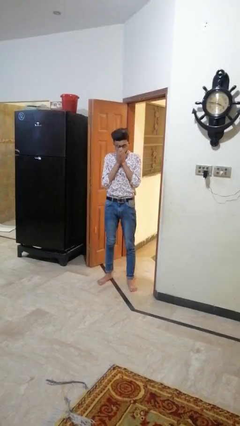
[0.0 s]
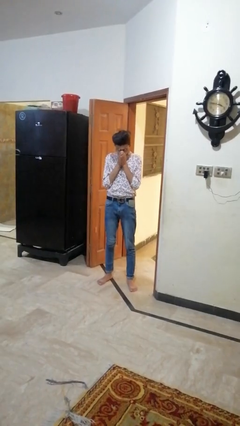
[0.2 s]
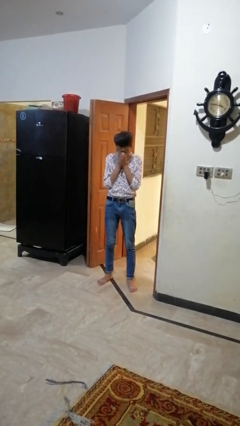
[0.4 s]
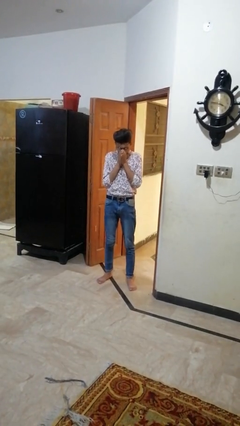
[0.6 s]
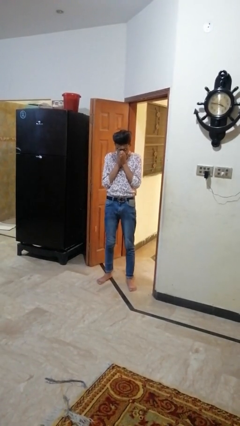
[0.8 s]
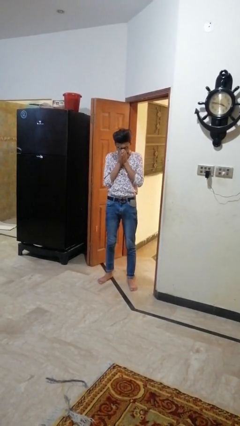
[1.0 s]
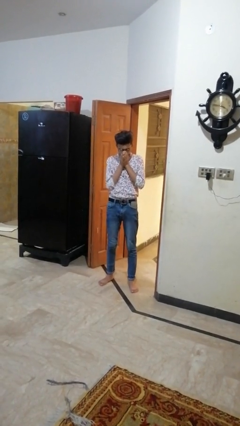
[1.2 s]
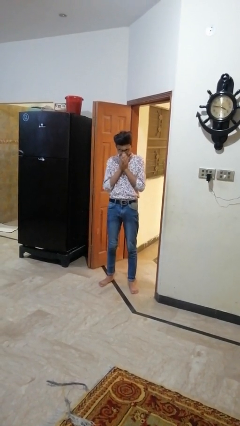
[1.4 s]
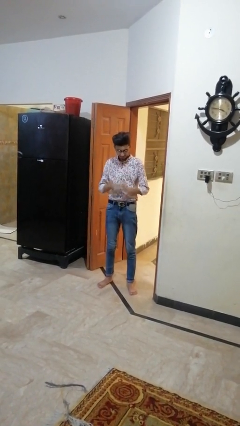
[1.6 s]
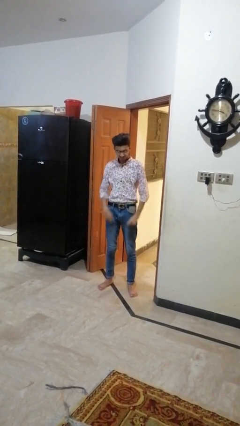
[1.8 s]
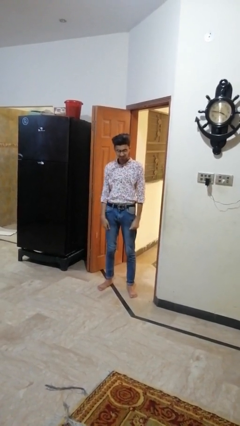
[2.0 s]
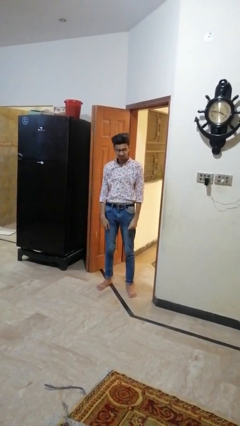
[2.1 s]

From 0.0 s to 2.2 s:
person sneezes into hand

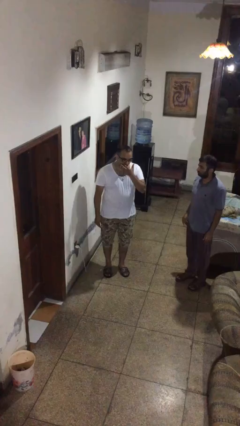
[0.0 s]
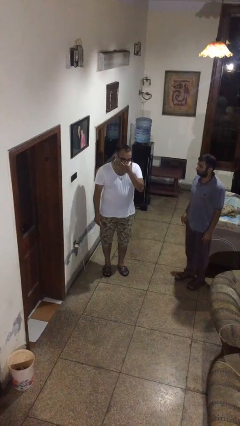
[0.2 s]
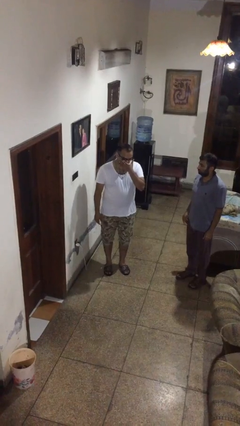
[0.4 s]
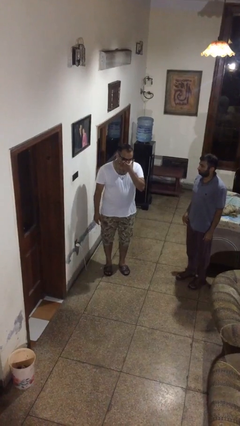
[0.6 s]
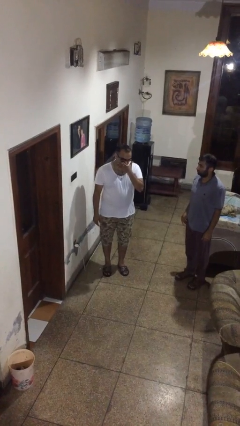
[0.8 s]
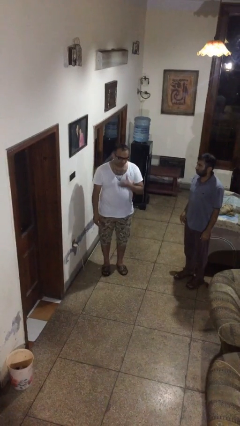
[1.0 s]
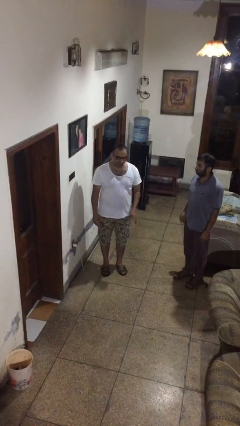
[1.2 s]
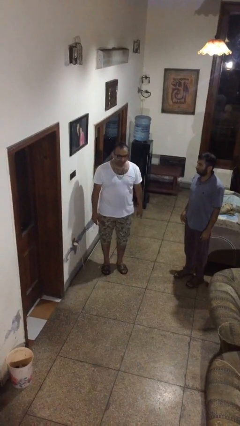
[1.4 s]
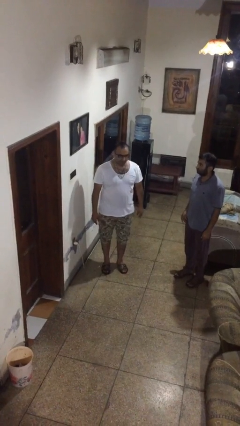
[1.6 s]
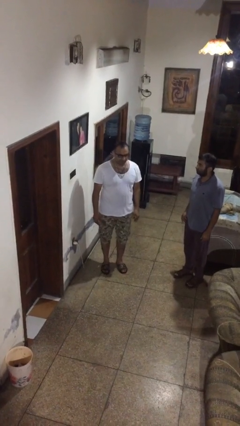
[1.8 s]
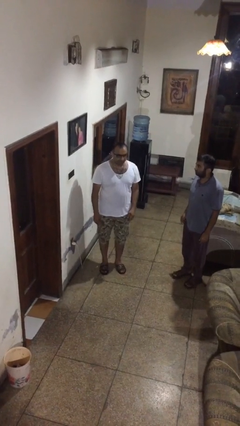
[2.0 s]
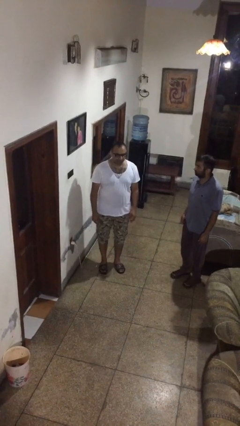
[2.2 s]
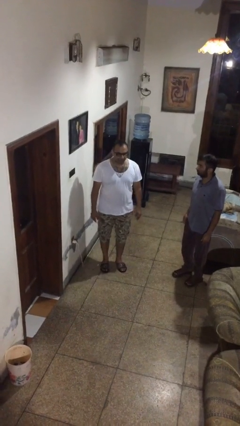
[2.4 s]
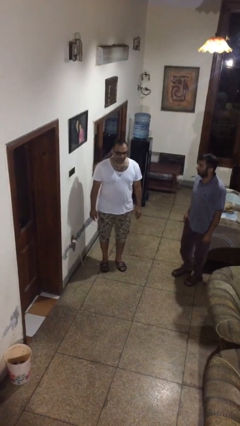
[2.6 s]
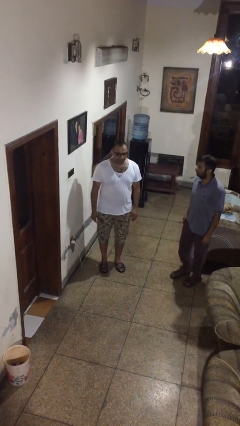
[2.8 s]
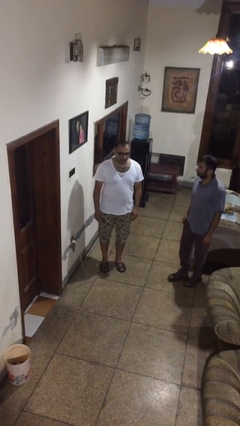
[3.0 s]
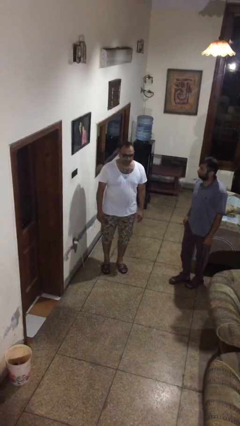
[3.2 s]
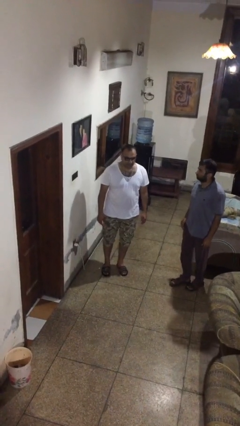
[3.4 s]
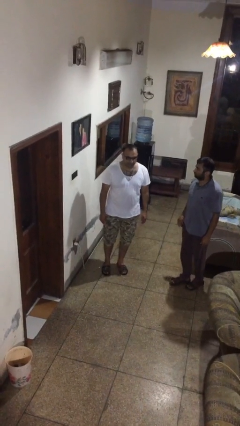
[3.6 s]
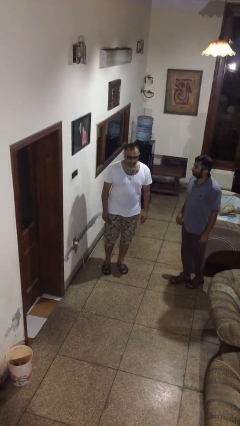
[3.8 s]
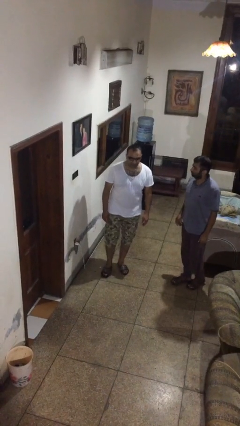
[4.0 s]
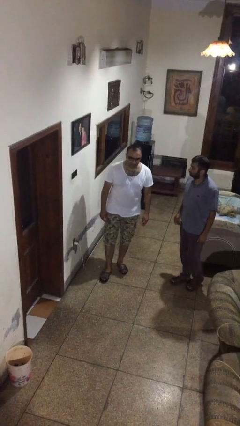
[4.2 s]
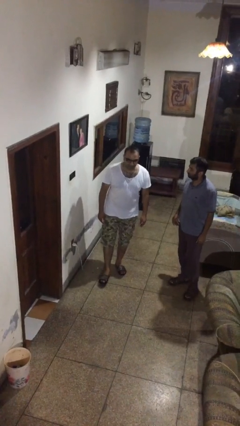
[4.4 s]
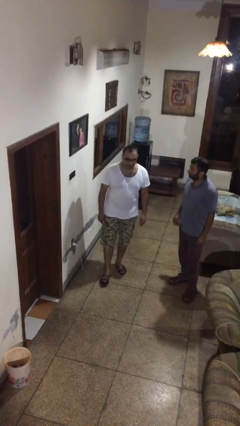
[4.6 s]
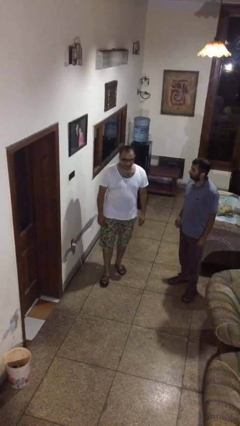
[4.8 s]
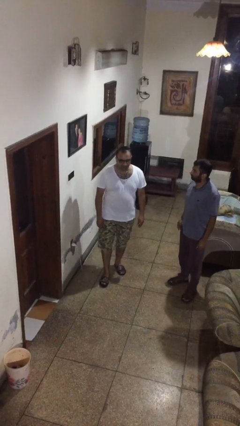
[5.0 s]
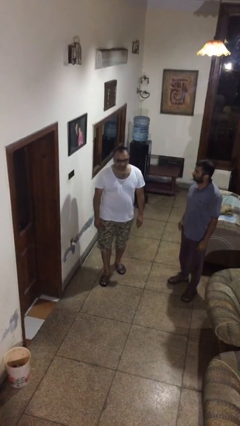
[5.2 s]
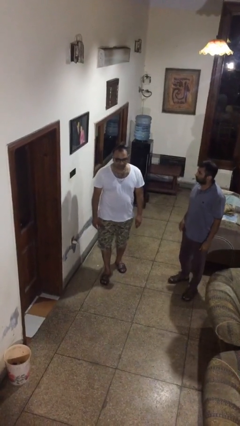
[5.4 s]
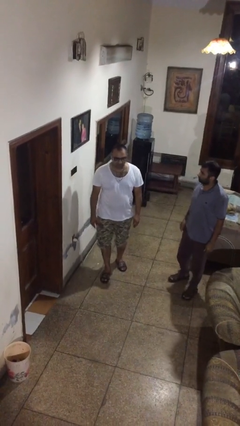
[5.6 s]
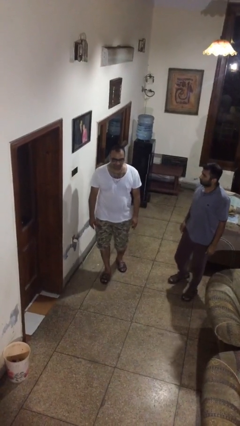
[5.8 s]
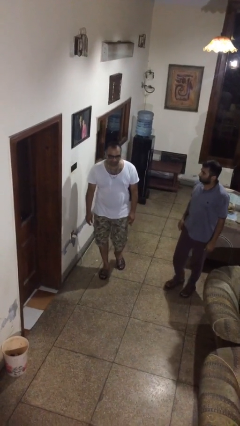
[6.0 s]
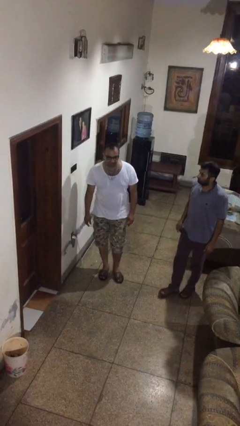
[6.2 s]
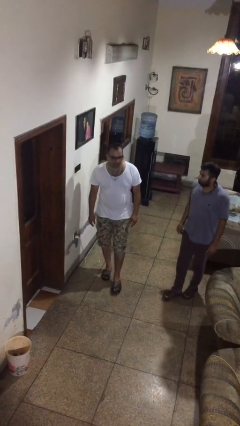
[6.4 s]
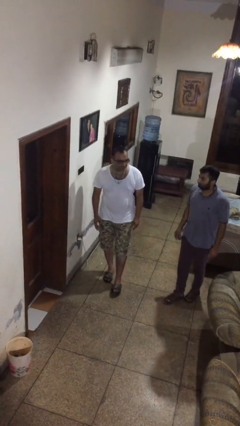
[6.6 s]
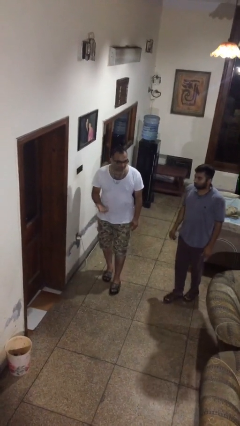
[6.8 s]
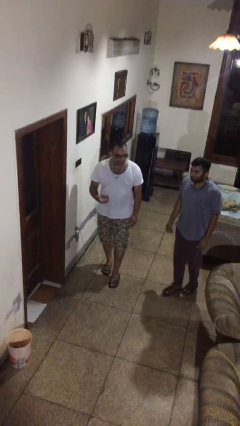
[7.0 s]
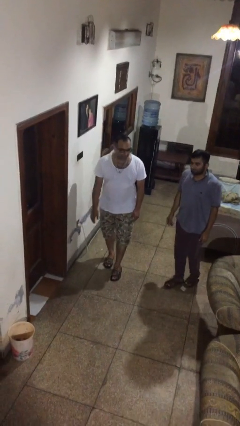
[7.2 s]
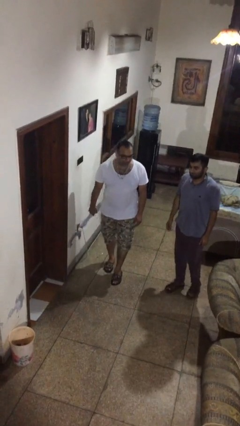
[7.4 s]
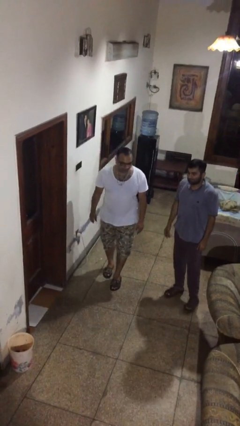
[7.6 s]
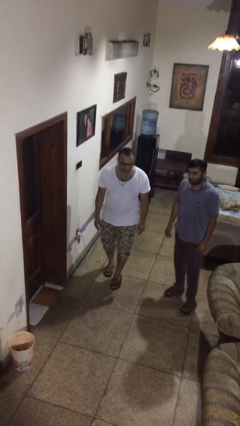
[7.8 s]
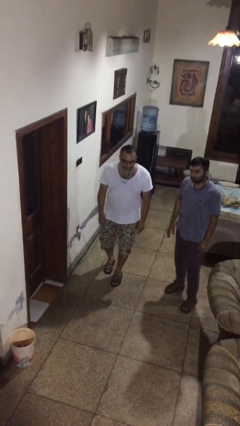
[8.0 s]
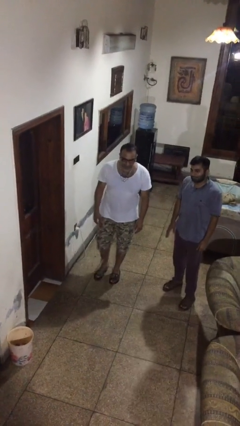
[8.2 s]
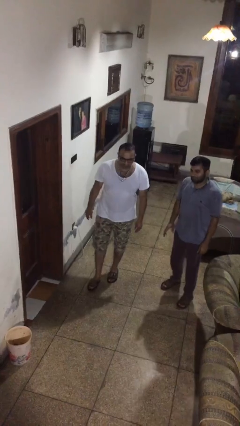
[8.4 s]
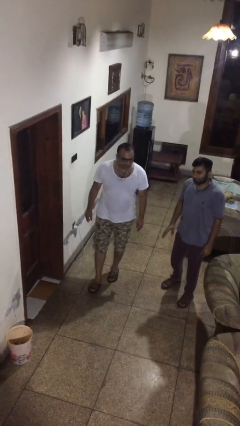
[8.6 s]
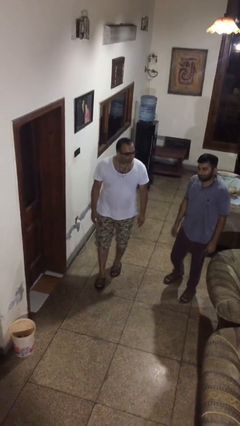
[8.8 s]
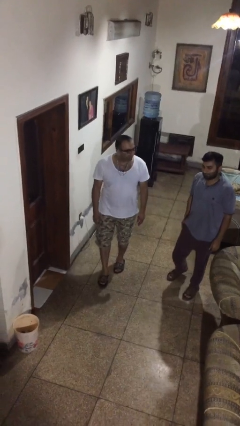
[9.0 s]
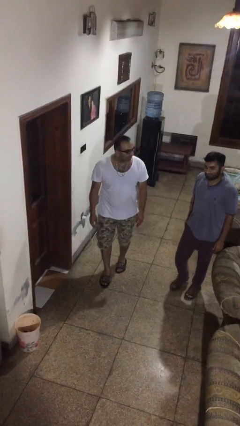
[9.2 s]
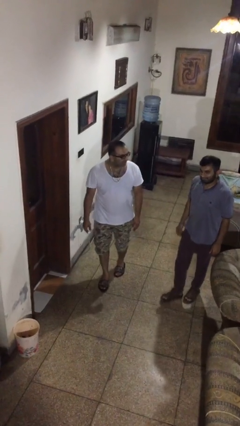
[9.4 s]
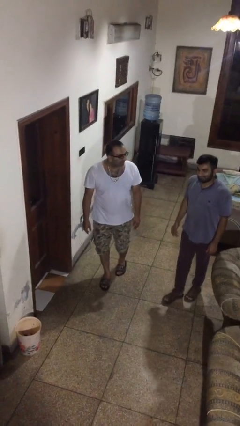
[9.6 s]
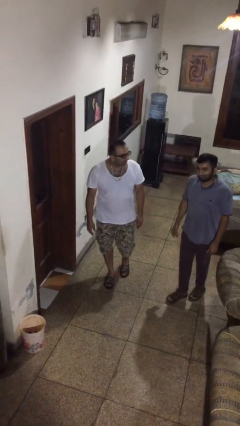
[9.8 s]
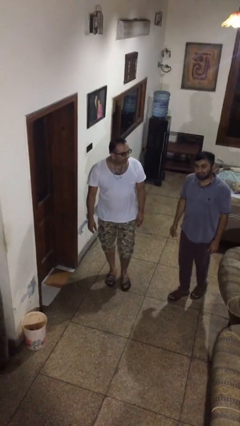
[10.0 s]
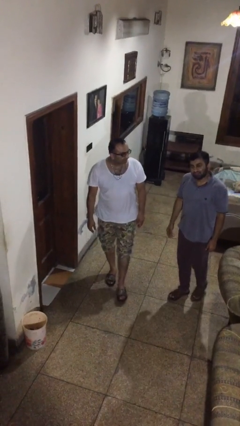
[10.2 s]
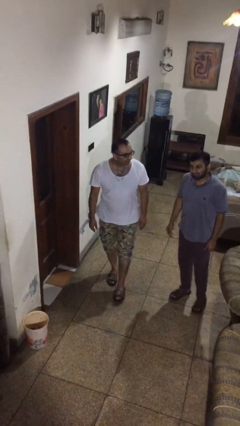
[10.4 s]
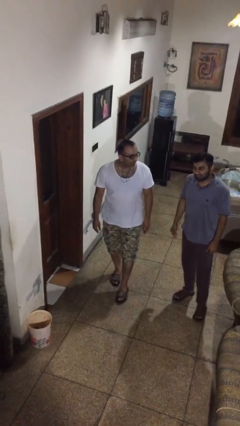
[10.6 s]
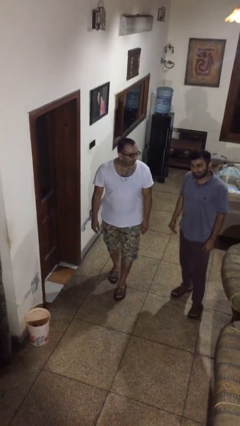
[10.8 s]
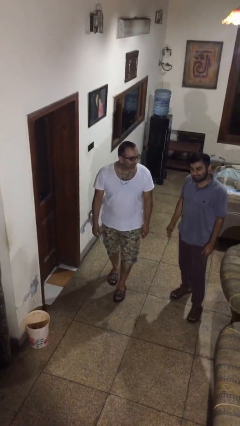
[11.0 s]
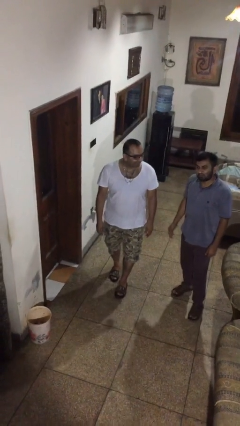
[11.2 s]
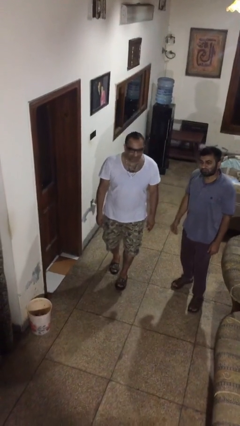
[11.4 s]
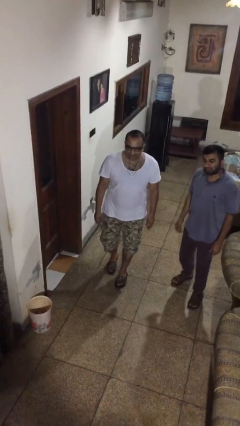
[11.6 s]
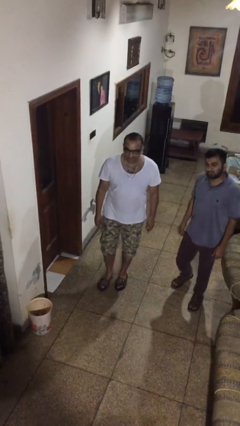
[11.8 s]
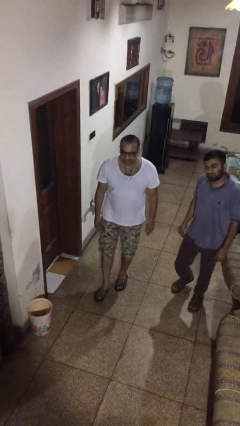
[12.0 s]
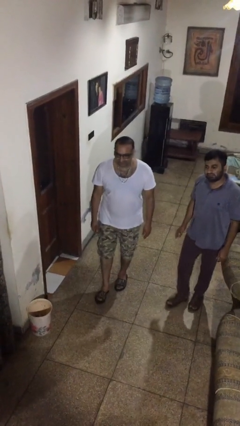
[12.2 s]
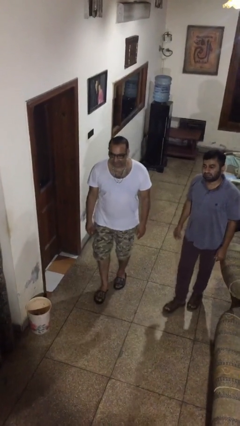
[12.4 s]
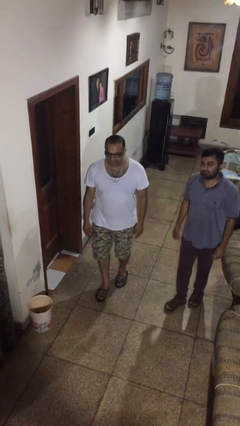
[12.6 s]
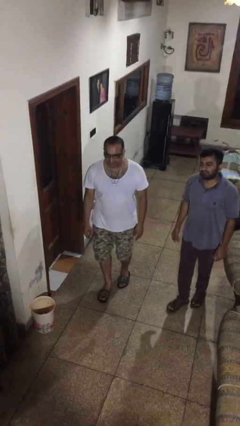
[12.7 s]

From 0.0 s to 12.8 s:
person talks to person

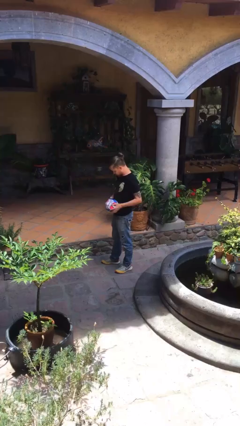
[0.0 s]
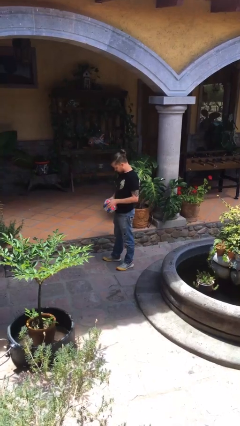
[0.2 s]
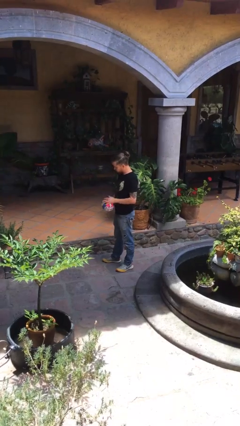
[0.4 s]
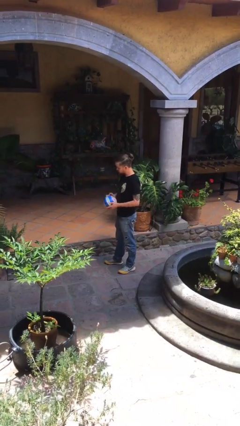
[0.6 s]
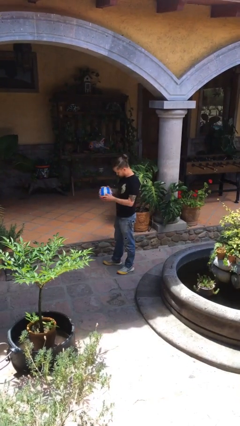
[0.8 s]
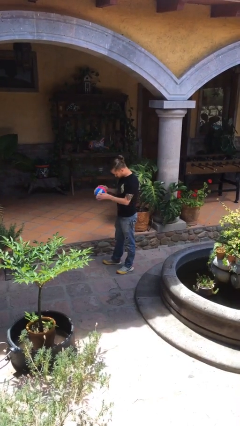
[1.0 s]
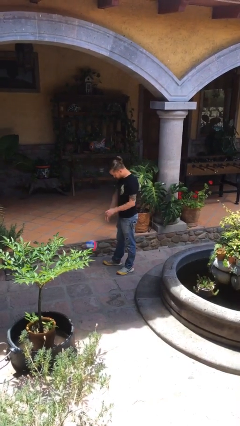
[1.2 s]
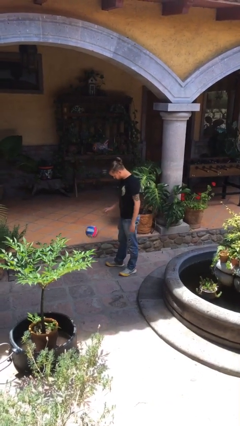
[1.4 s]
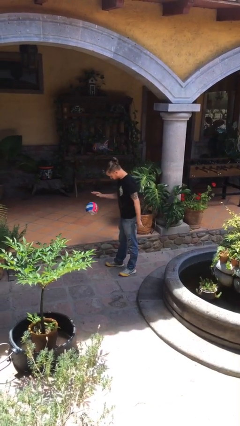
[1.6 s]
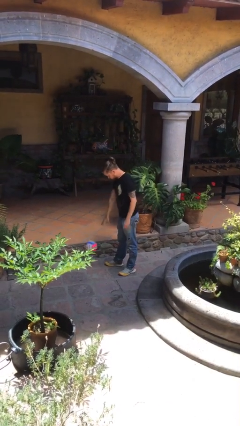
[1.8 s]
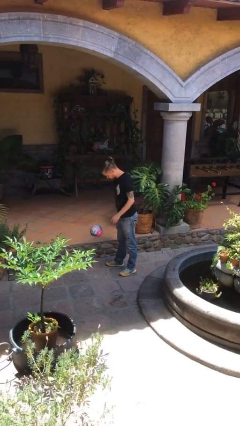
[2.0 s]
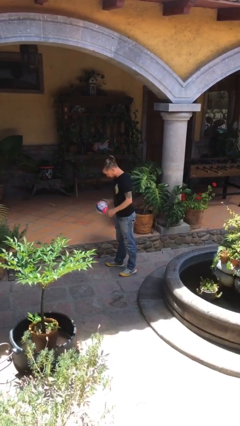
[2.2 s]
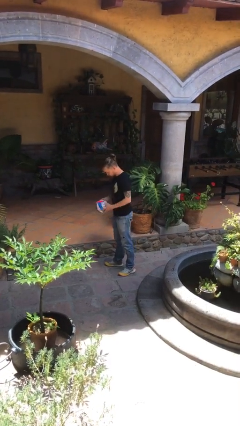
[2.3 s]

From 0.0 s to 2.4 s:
person bounces ball on floor

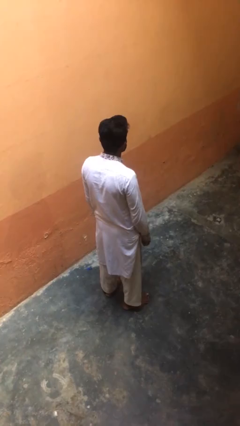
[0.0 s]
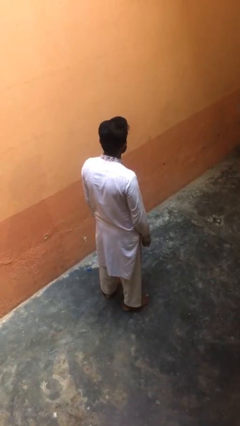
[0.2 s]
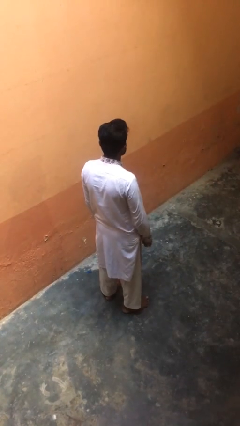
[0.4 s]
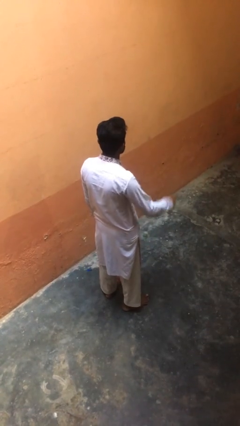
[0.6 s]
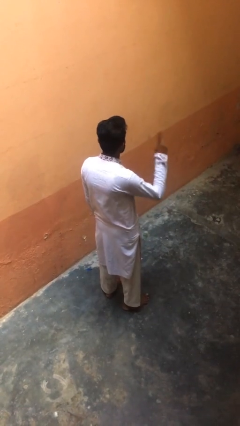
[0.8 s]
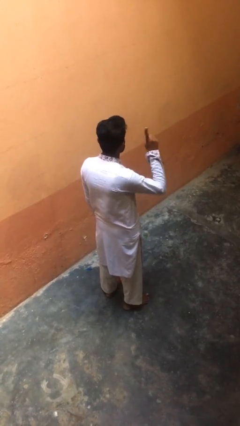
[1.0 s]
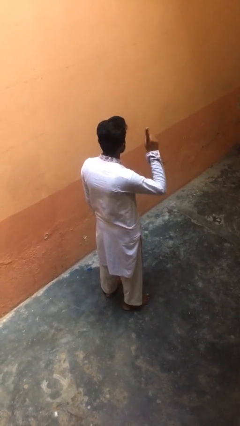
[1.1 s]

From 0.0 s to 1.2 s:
person gestures number one
